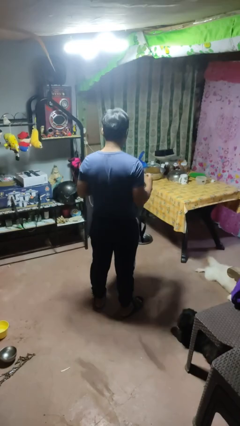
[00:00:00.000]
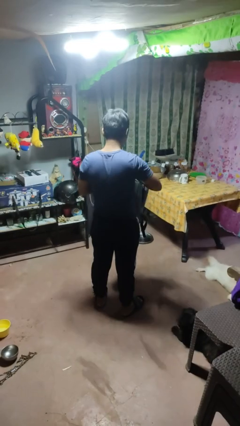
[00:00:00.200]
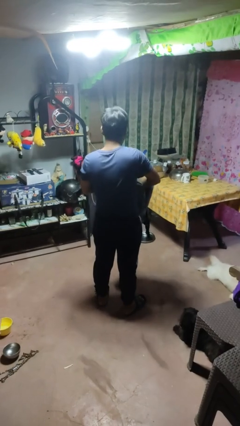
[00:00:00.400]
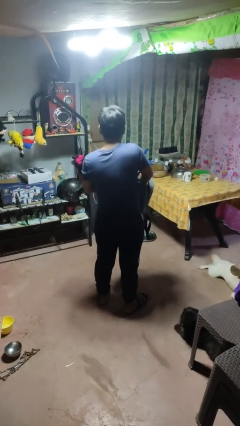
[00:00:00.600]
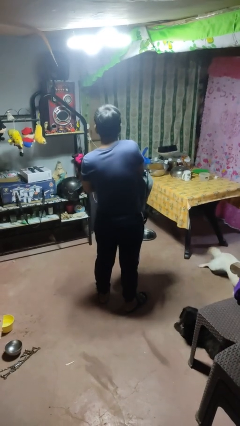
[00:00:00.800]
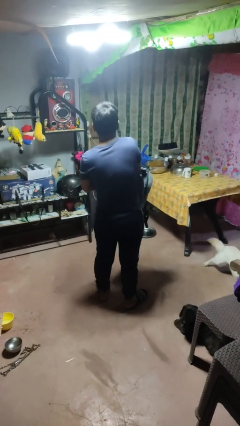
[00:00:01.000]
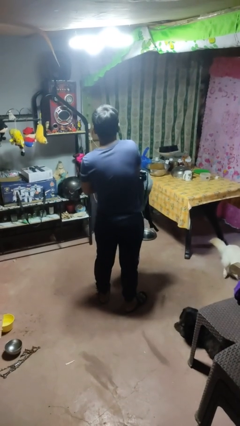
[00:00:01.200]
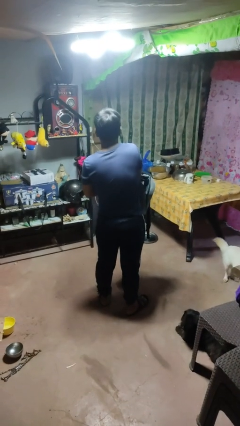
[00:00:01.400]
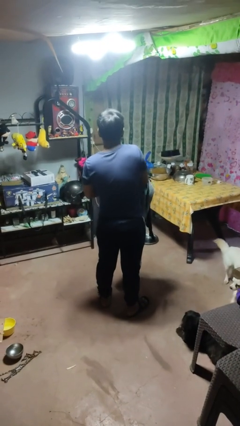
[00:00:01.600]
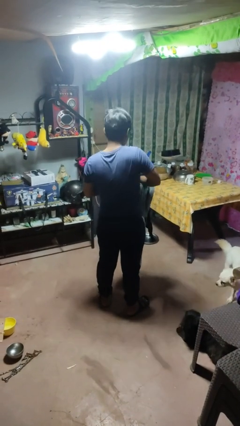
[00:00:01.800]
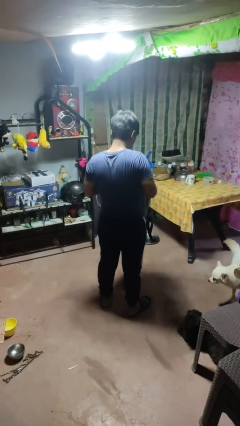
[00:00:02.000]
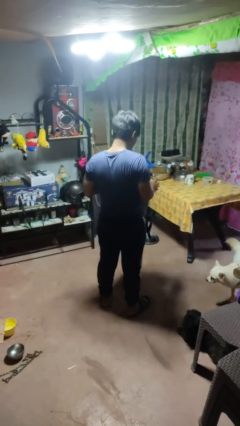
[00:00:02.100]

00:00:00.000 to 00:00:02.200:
person searches in bag

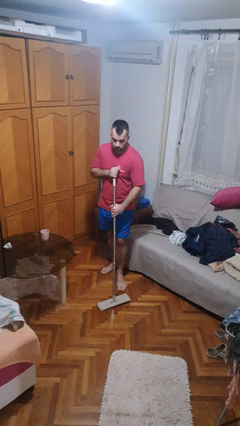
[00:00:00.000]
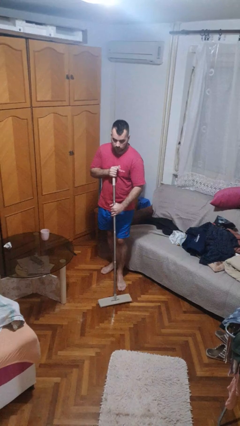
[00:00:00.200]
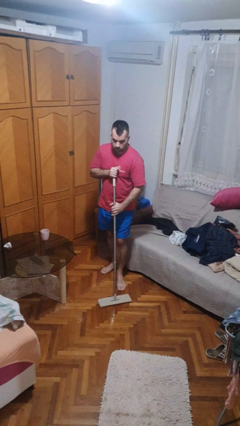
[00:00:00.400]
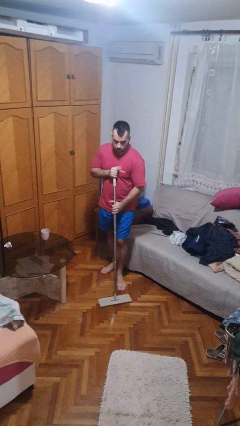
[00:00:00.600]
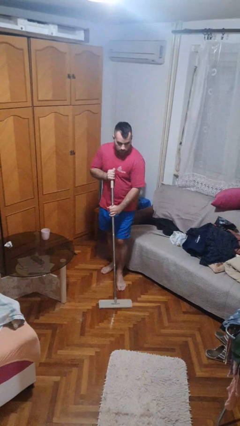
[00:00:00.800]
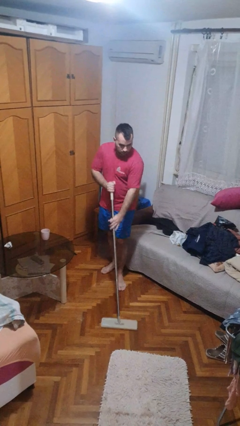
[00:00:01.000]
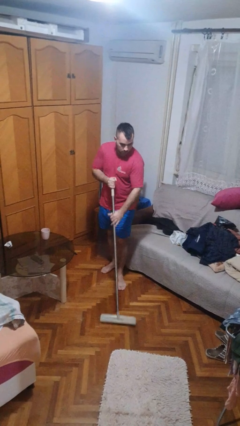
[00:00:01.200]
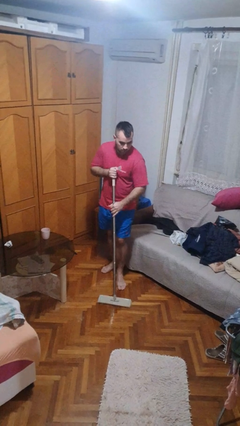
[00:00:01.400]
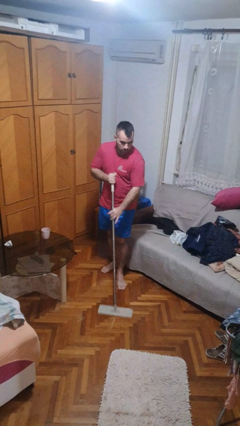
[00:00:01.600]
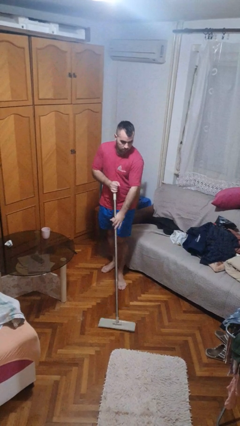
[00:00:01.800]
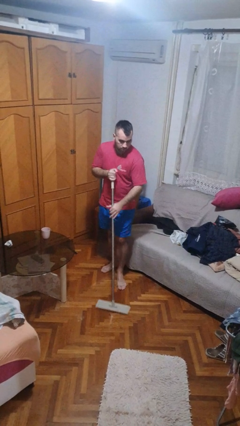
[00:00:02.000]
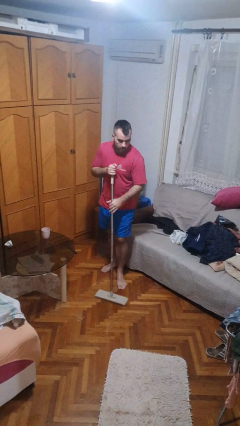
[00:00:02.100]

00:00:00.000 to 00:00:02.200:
person mops

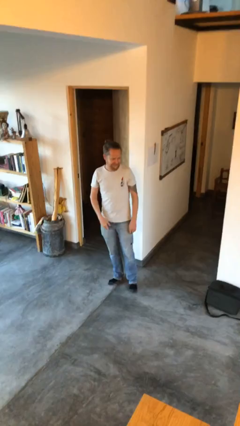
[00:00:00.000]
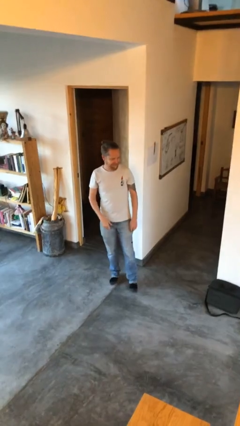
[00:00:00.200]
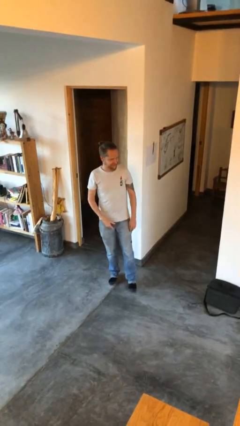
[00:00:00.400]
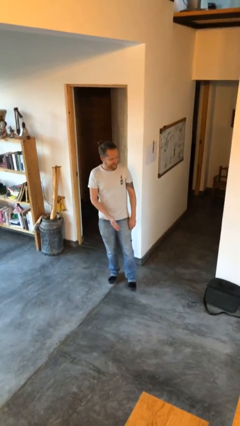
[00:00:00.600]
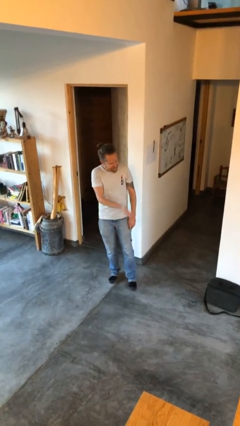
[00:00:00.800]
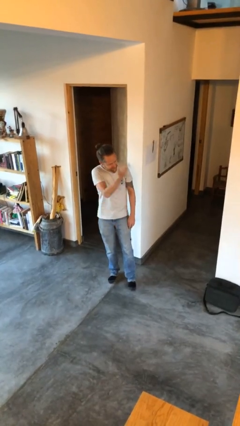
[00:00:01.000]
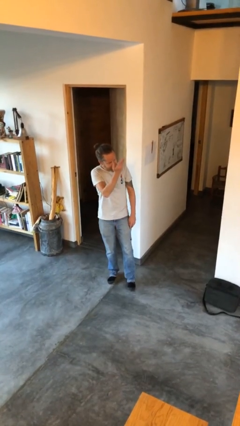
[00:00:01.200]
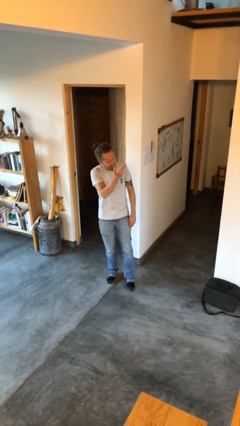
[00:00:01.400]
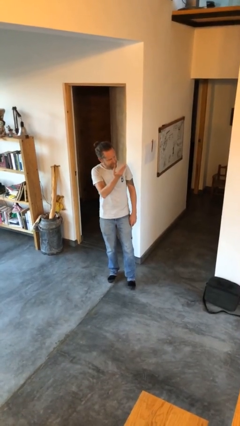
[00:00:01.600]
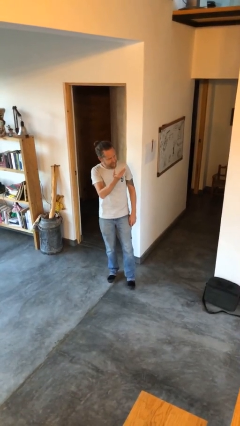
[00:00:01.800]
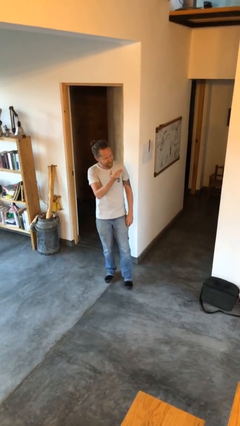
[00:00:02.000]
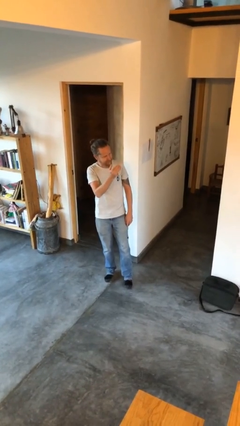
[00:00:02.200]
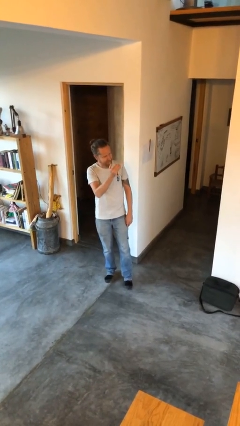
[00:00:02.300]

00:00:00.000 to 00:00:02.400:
person gestures swipe up

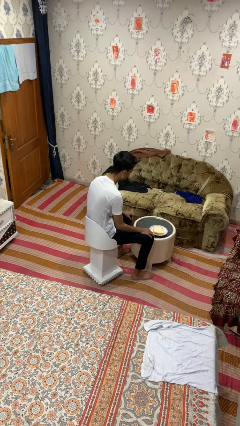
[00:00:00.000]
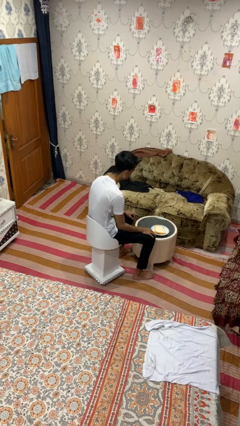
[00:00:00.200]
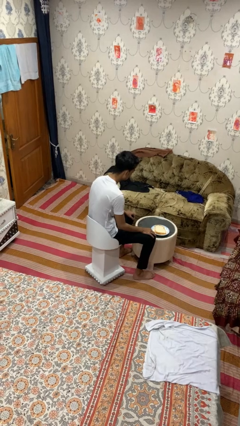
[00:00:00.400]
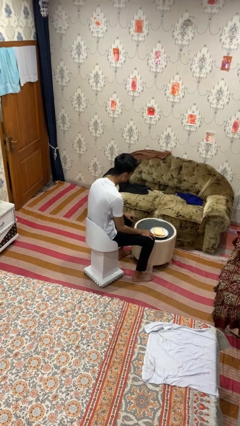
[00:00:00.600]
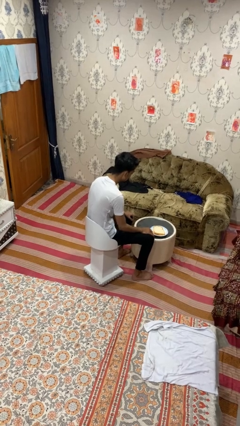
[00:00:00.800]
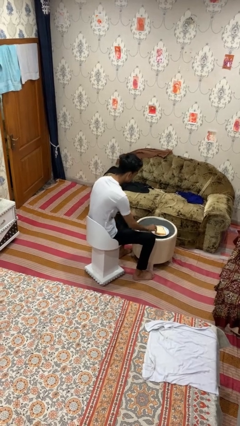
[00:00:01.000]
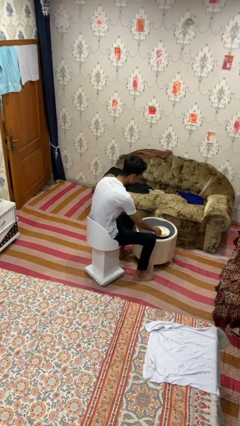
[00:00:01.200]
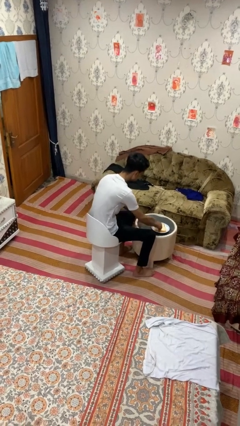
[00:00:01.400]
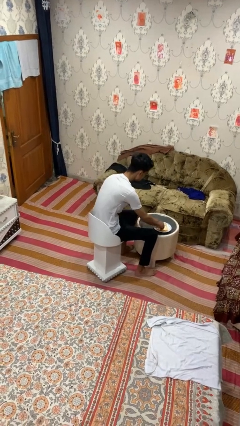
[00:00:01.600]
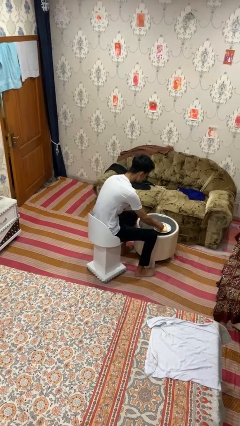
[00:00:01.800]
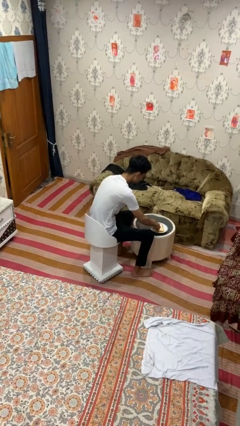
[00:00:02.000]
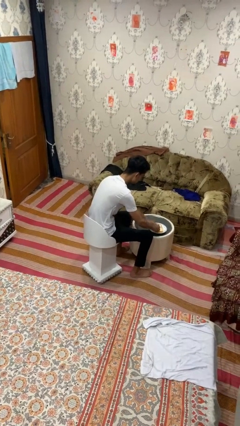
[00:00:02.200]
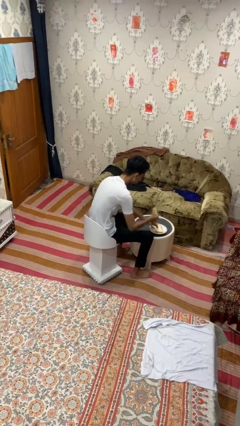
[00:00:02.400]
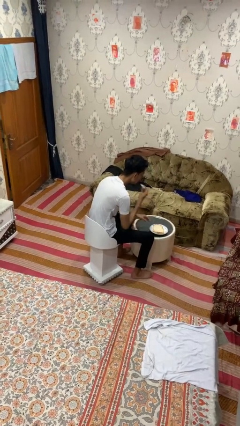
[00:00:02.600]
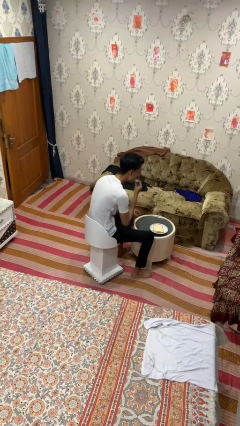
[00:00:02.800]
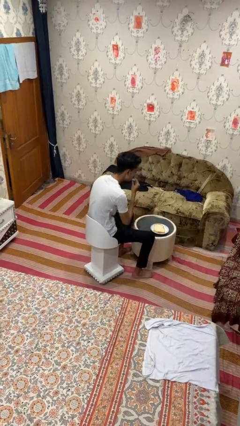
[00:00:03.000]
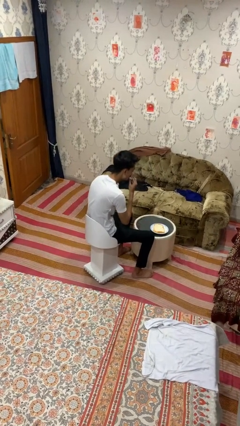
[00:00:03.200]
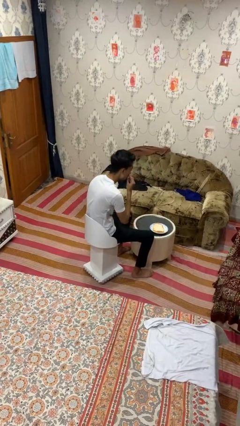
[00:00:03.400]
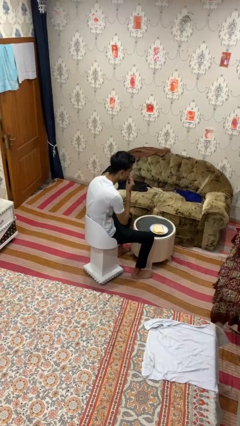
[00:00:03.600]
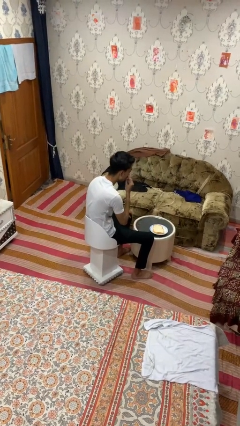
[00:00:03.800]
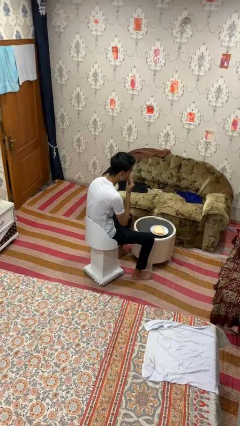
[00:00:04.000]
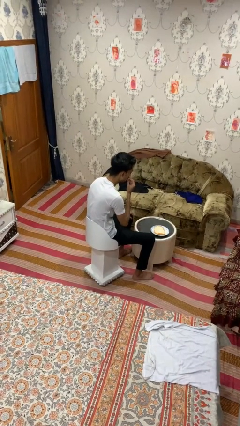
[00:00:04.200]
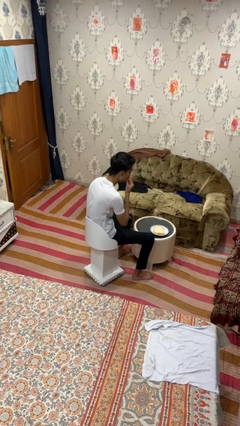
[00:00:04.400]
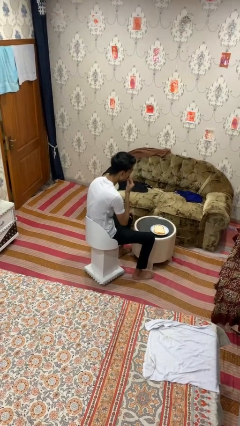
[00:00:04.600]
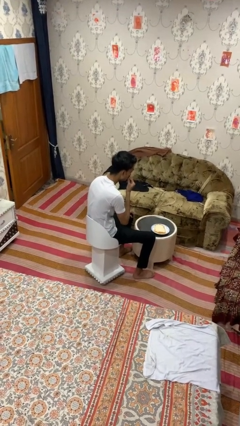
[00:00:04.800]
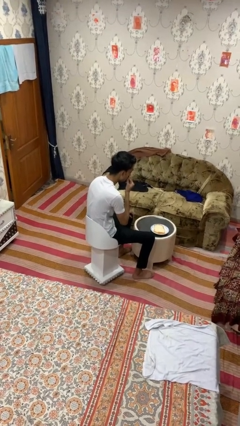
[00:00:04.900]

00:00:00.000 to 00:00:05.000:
person eats with hands

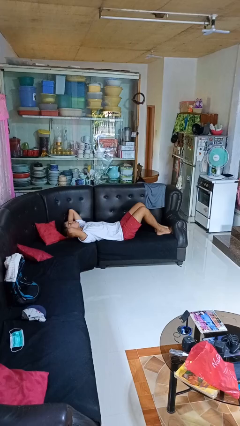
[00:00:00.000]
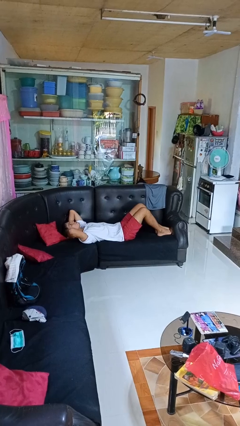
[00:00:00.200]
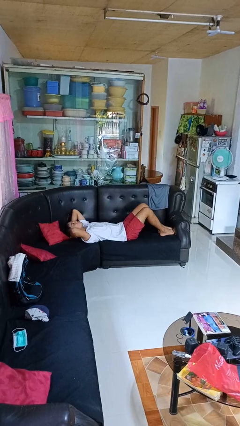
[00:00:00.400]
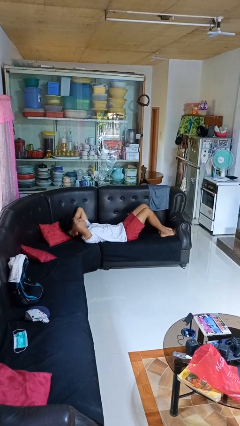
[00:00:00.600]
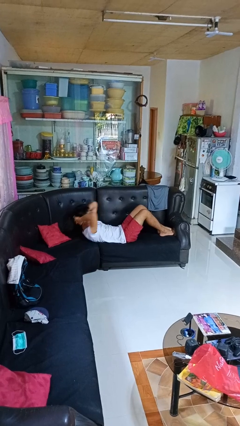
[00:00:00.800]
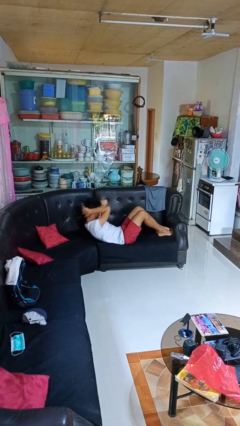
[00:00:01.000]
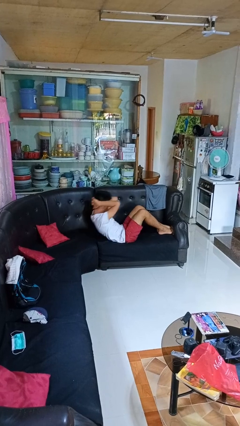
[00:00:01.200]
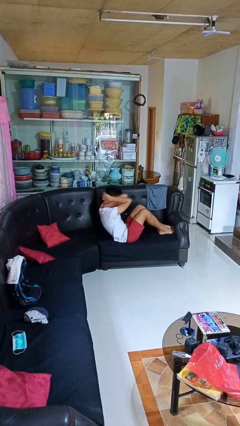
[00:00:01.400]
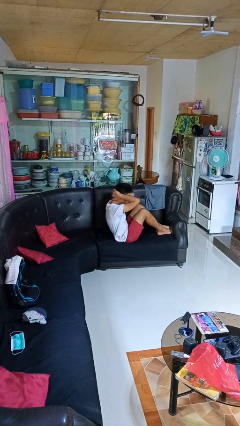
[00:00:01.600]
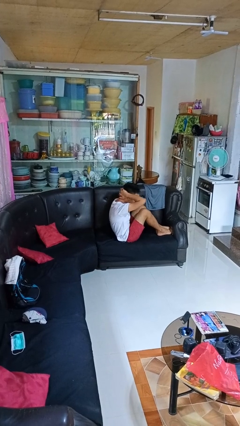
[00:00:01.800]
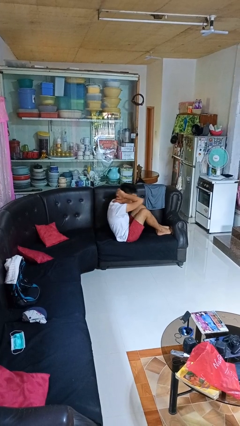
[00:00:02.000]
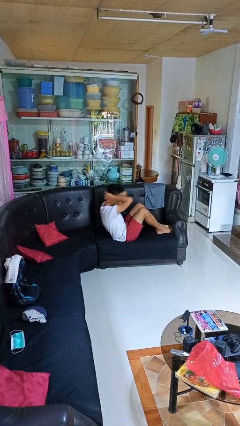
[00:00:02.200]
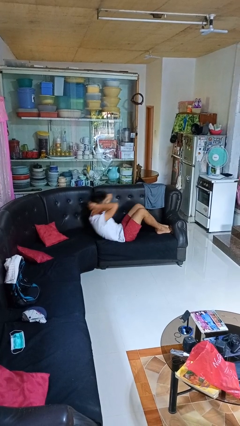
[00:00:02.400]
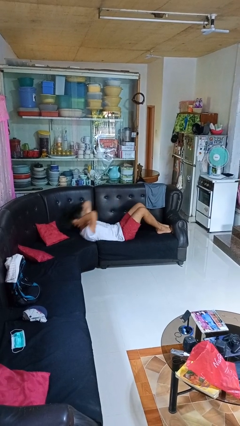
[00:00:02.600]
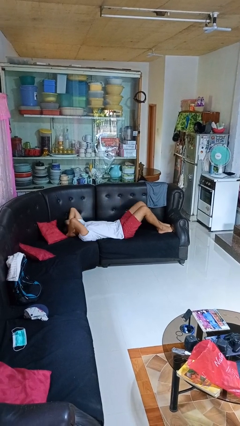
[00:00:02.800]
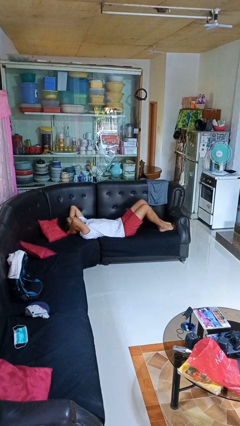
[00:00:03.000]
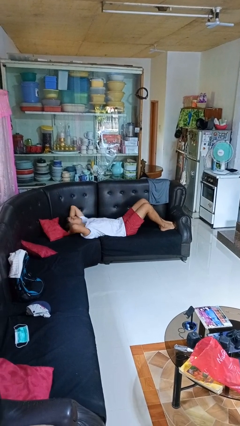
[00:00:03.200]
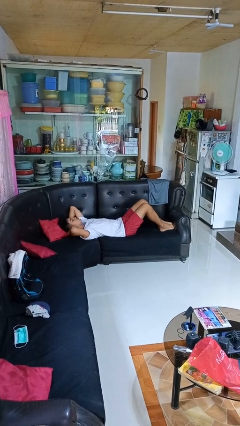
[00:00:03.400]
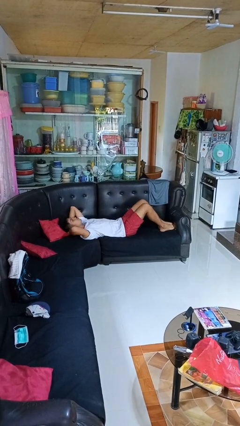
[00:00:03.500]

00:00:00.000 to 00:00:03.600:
person exercises with situp

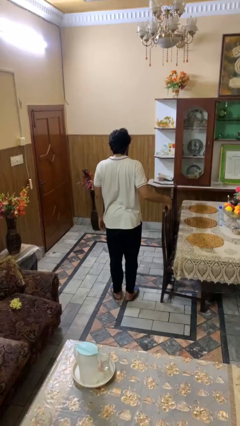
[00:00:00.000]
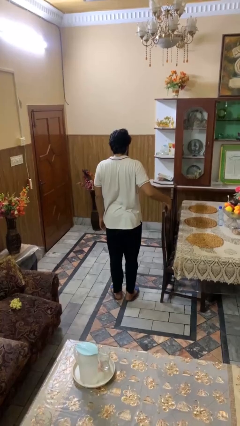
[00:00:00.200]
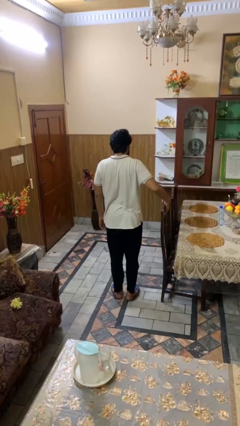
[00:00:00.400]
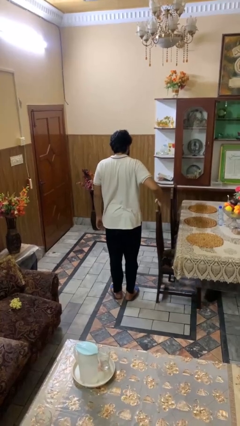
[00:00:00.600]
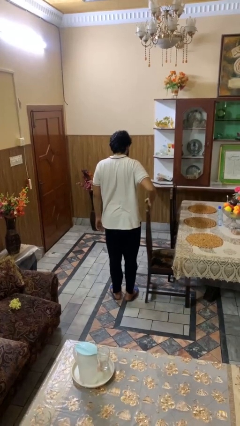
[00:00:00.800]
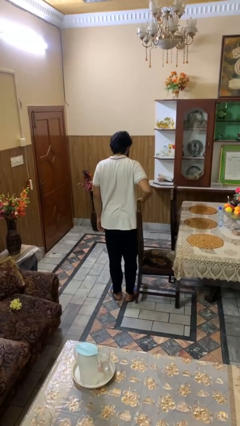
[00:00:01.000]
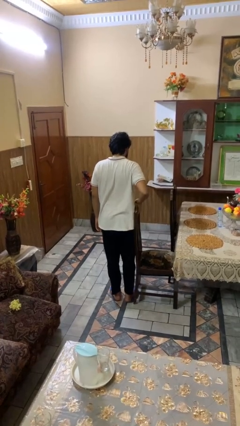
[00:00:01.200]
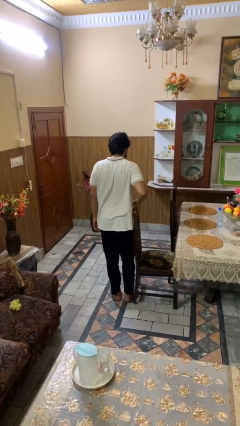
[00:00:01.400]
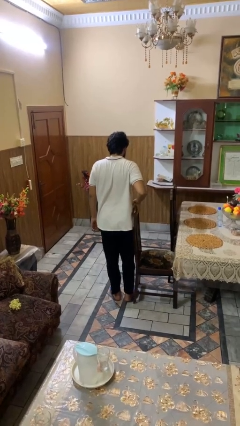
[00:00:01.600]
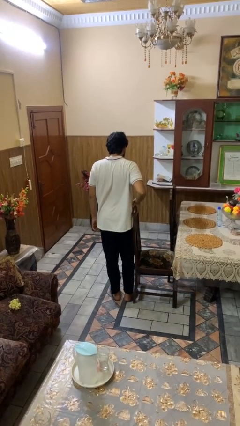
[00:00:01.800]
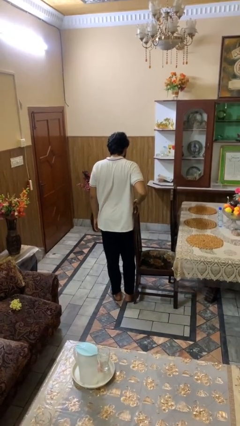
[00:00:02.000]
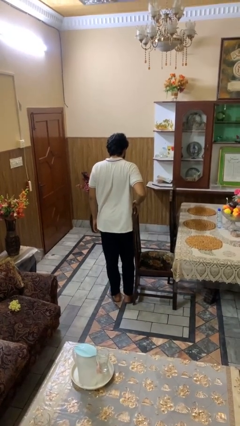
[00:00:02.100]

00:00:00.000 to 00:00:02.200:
person pulls out chair
